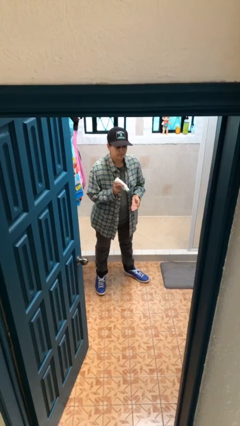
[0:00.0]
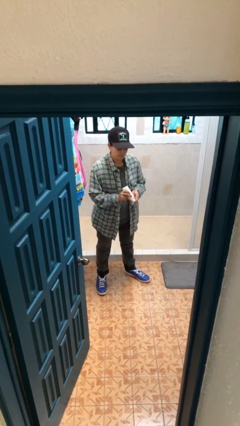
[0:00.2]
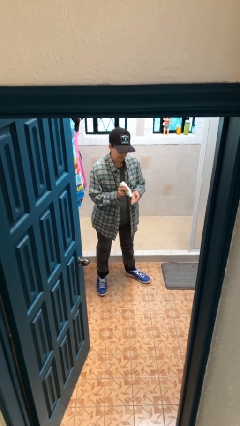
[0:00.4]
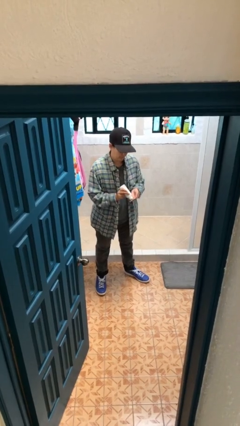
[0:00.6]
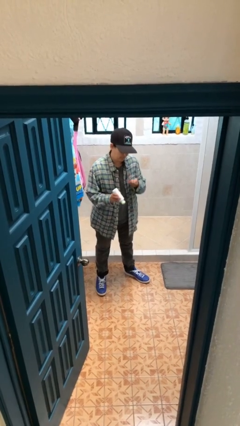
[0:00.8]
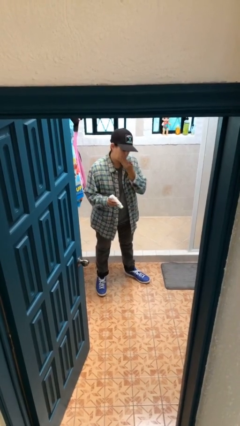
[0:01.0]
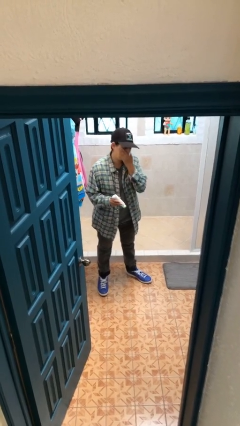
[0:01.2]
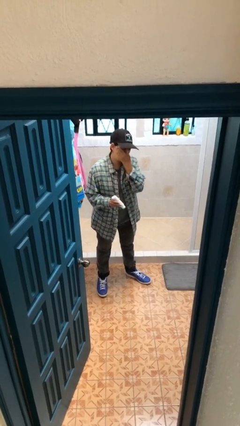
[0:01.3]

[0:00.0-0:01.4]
person applies facial moisturizer

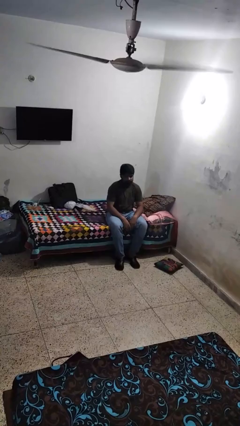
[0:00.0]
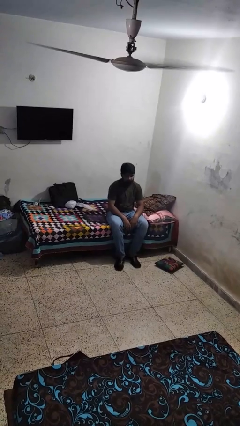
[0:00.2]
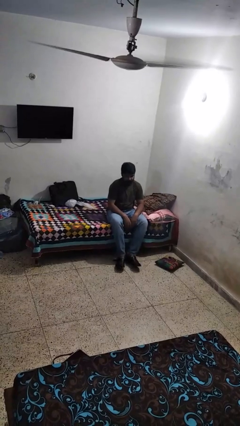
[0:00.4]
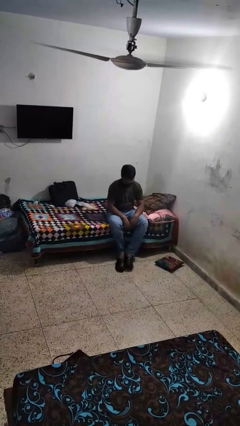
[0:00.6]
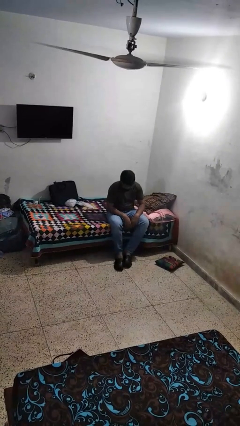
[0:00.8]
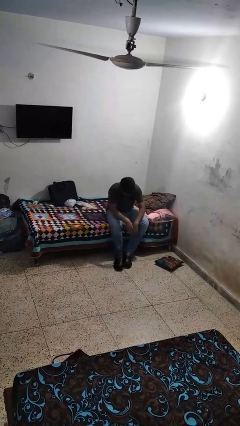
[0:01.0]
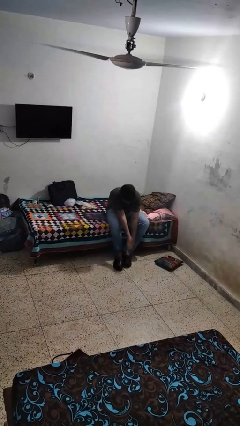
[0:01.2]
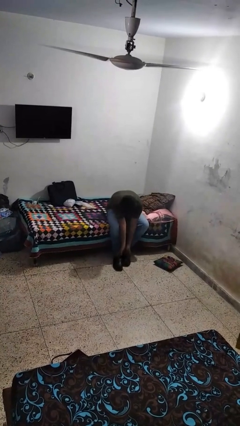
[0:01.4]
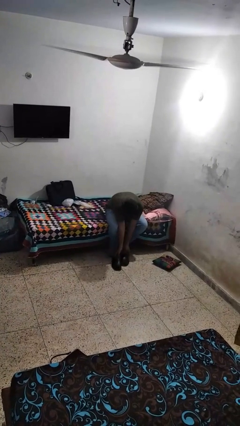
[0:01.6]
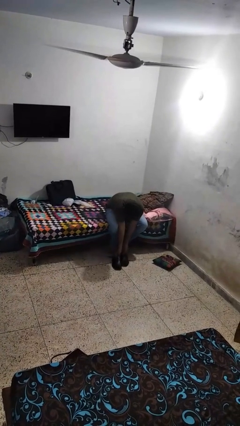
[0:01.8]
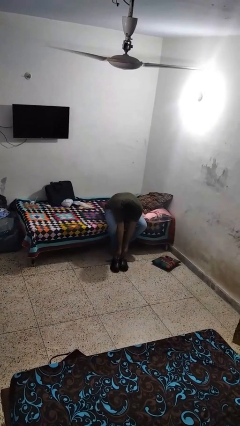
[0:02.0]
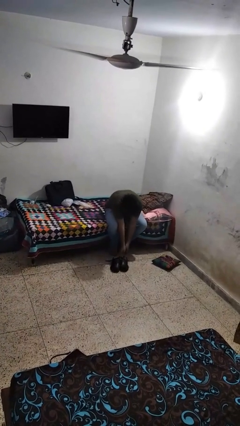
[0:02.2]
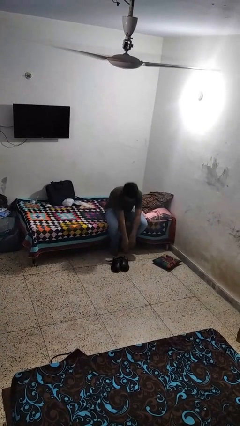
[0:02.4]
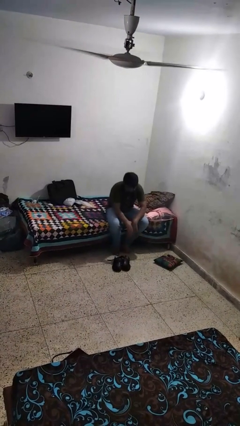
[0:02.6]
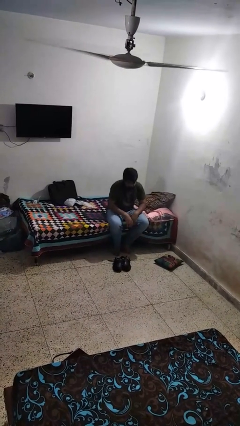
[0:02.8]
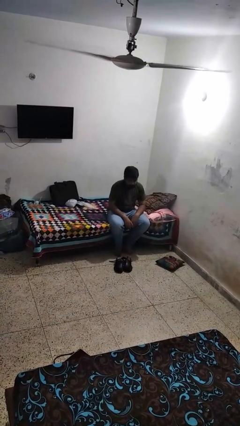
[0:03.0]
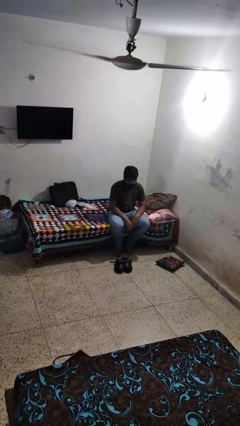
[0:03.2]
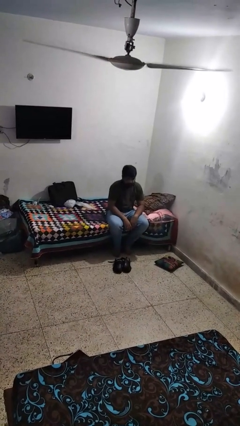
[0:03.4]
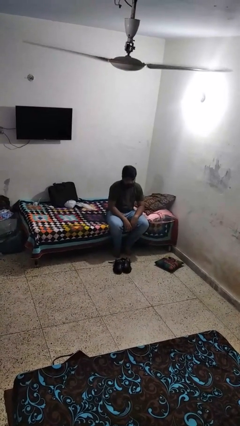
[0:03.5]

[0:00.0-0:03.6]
person takes off shoes

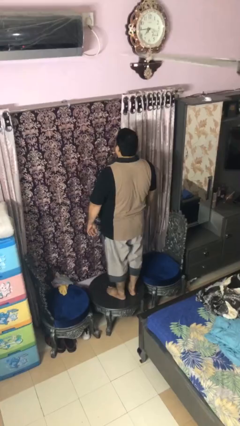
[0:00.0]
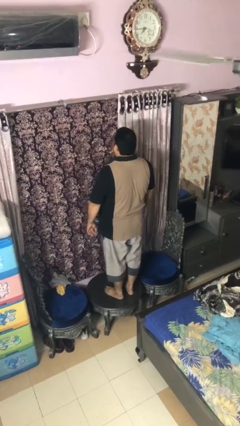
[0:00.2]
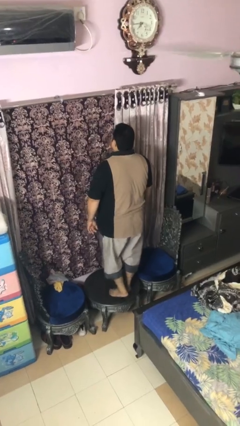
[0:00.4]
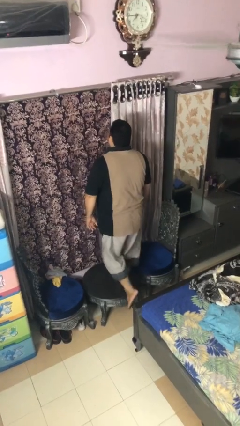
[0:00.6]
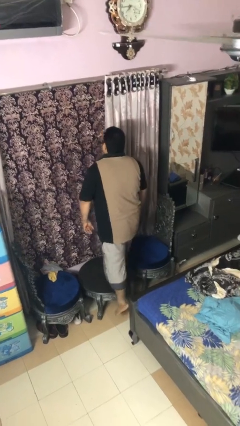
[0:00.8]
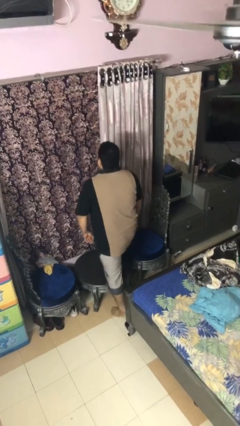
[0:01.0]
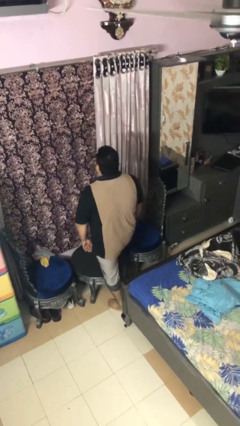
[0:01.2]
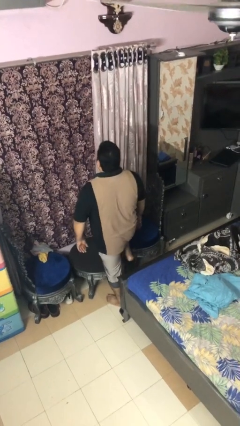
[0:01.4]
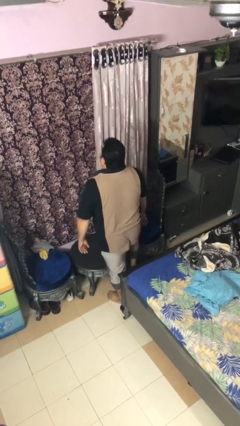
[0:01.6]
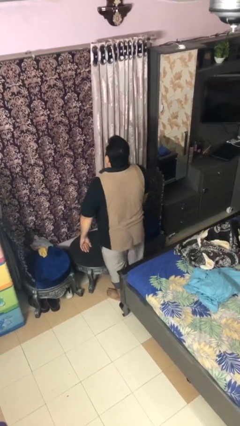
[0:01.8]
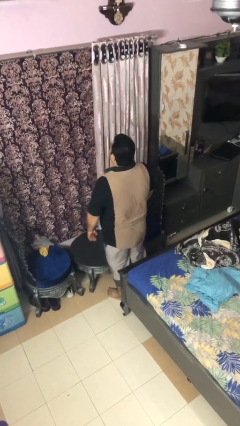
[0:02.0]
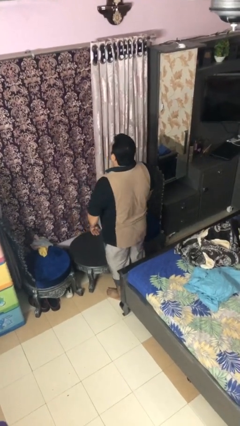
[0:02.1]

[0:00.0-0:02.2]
person climbs off table

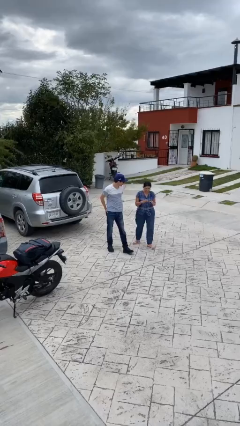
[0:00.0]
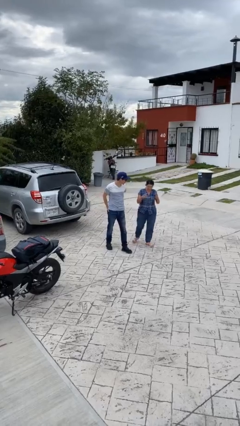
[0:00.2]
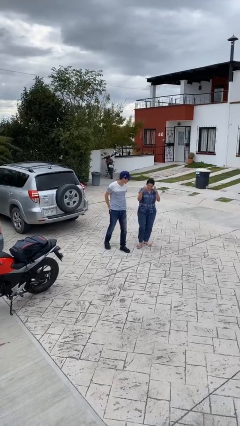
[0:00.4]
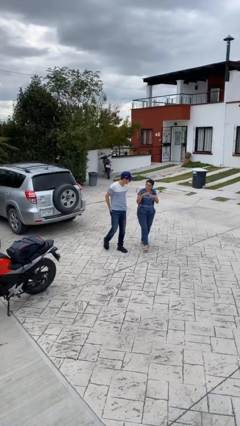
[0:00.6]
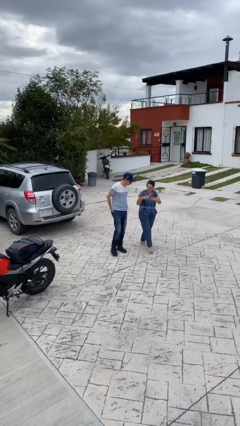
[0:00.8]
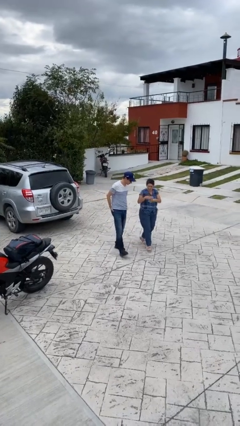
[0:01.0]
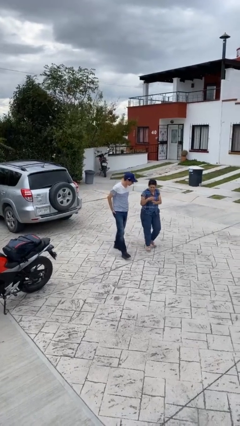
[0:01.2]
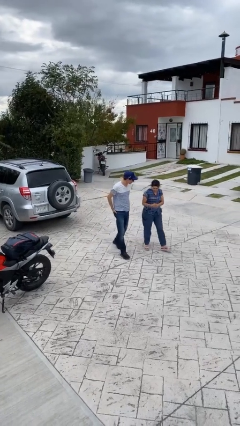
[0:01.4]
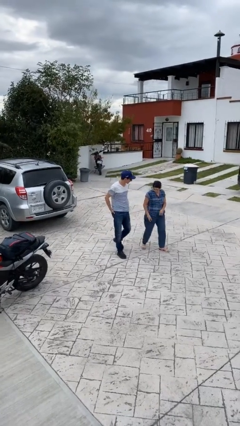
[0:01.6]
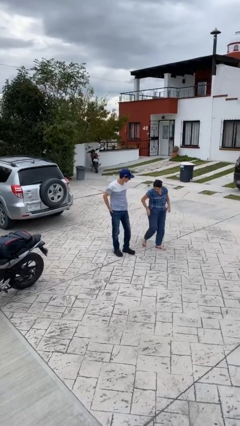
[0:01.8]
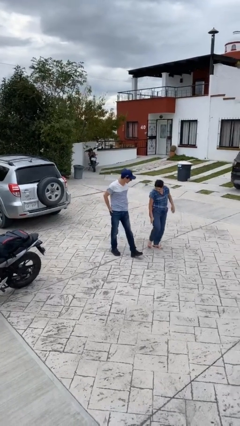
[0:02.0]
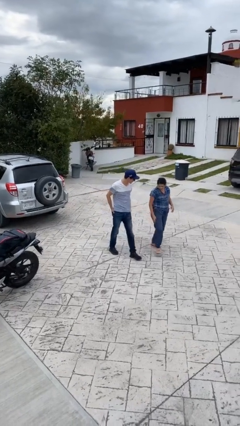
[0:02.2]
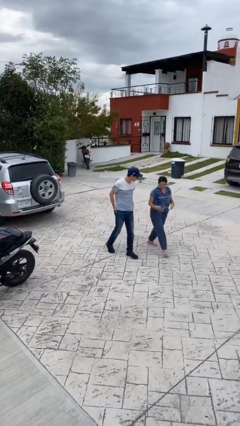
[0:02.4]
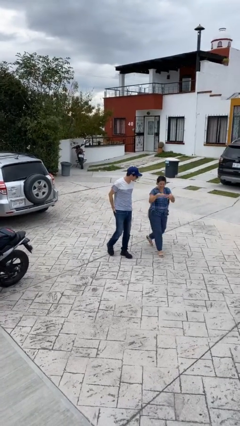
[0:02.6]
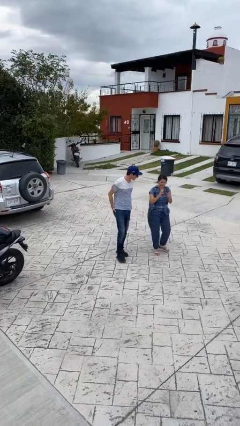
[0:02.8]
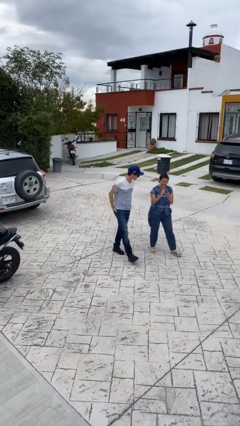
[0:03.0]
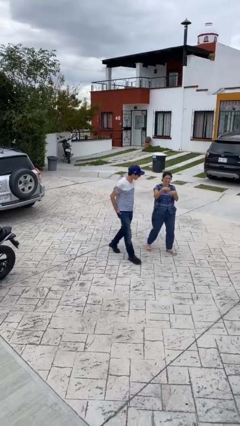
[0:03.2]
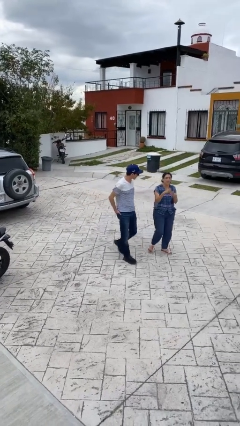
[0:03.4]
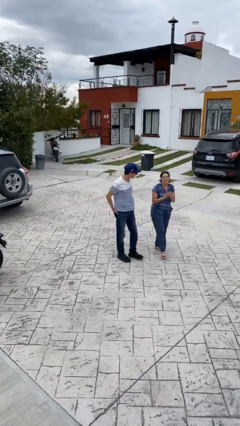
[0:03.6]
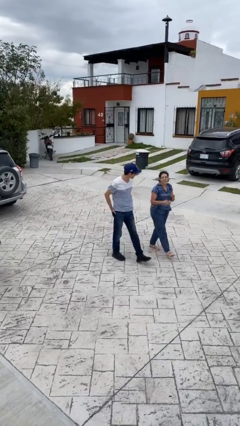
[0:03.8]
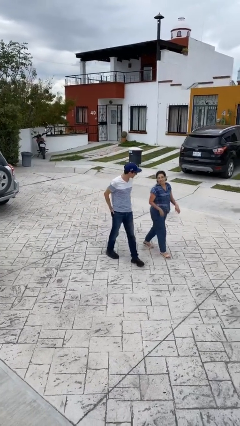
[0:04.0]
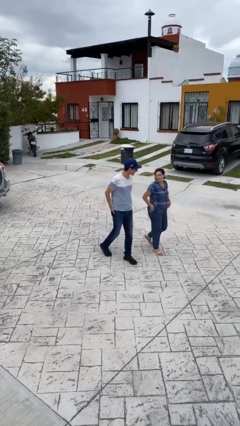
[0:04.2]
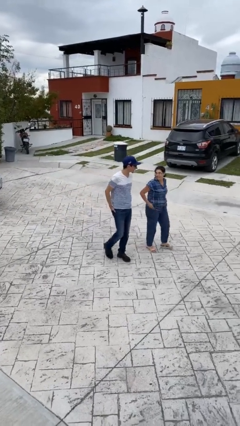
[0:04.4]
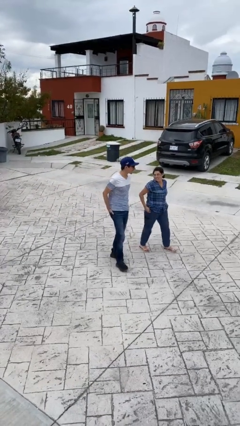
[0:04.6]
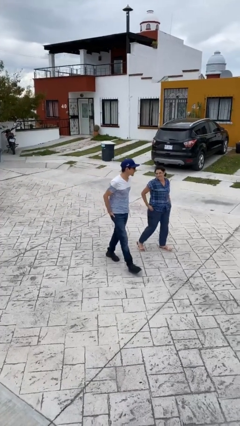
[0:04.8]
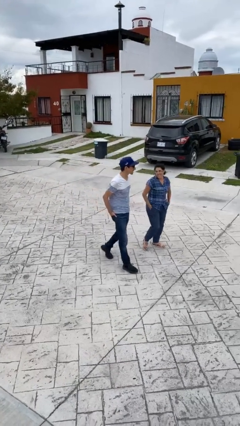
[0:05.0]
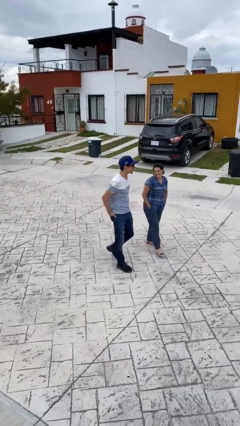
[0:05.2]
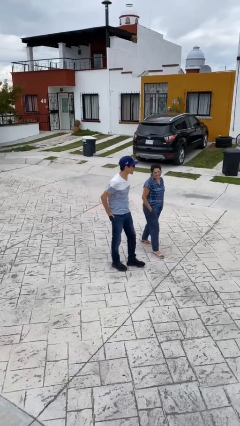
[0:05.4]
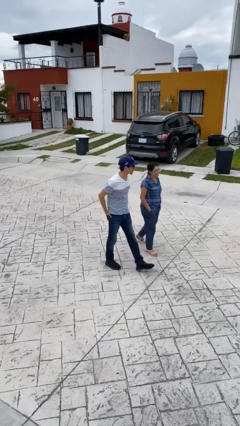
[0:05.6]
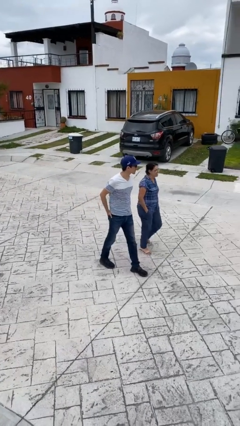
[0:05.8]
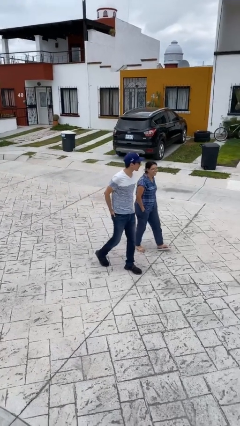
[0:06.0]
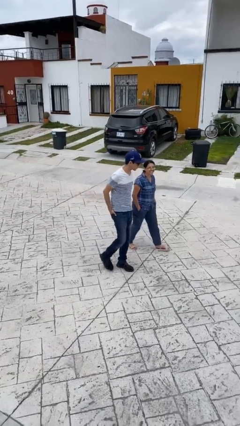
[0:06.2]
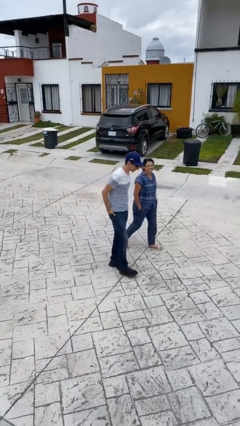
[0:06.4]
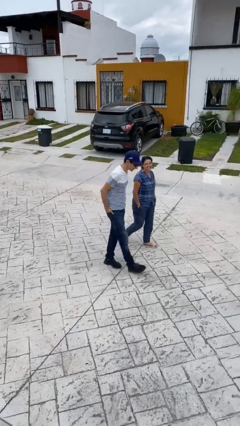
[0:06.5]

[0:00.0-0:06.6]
person talks to person

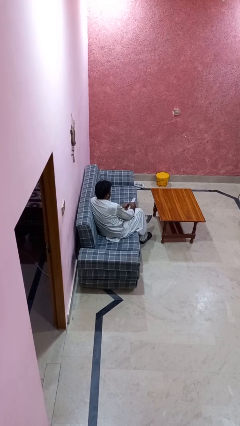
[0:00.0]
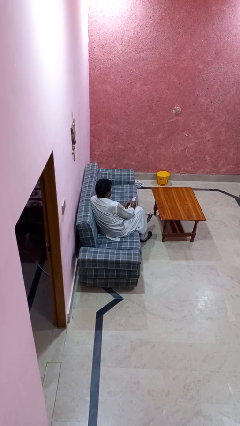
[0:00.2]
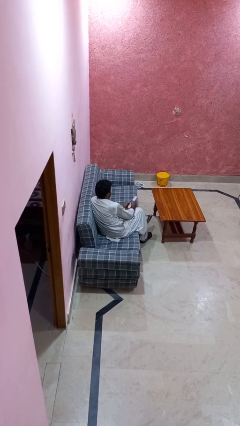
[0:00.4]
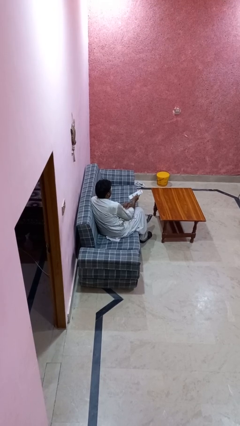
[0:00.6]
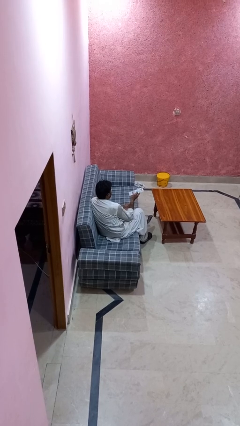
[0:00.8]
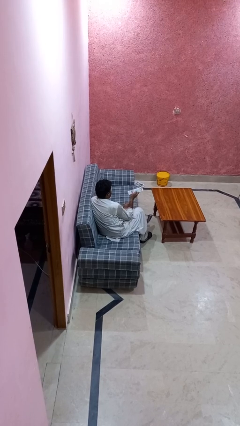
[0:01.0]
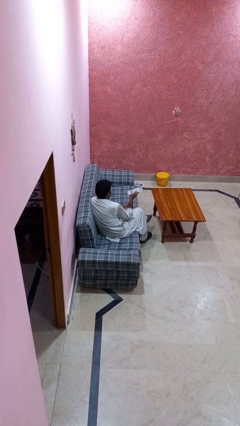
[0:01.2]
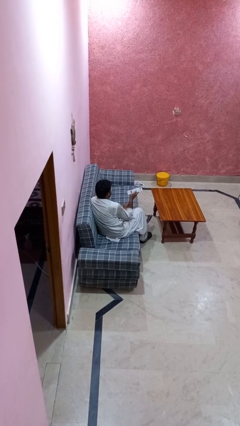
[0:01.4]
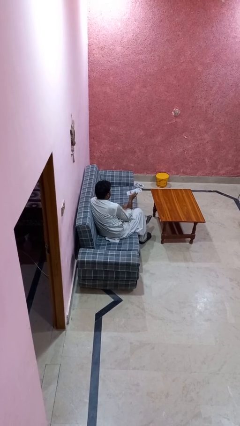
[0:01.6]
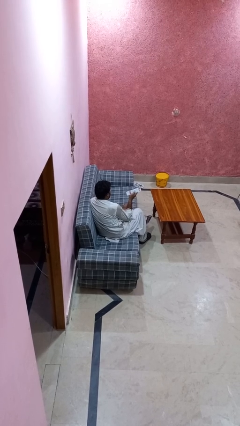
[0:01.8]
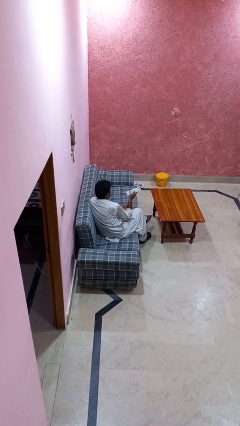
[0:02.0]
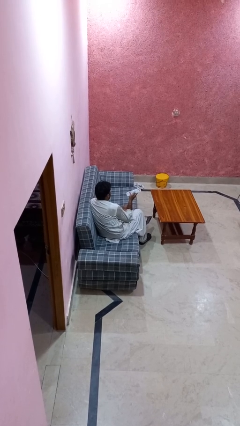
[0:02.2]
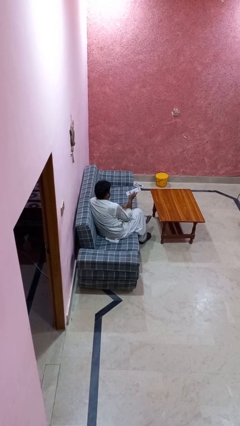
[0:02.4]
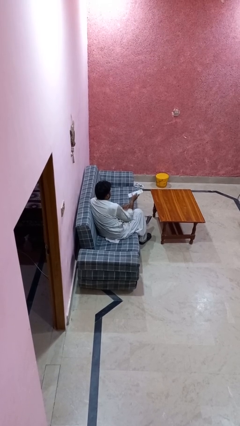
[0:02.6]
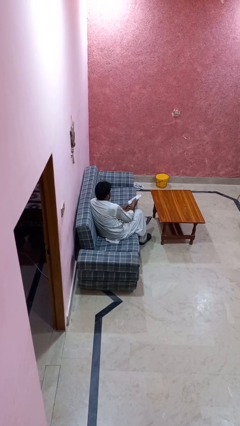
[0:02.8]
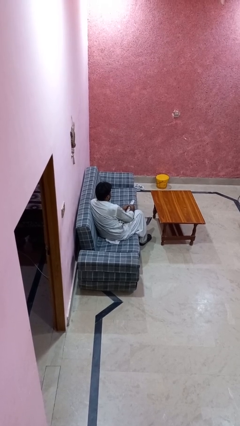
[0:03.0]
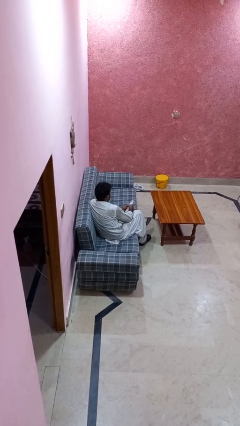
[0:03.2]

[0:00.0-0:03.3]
person uses television remote

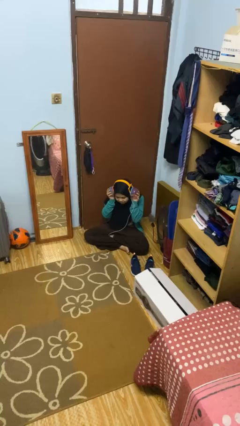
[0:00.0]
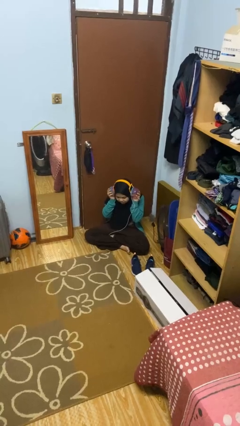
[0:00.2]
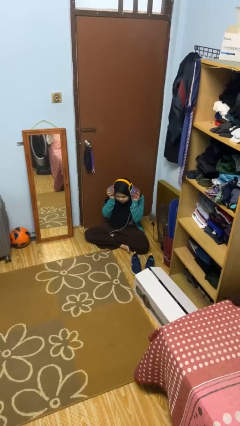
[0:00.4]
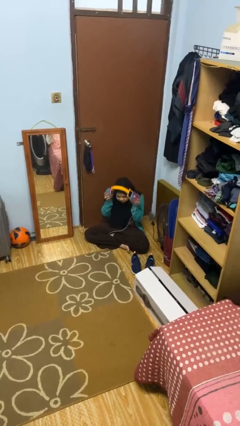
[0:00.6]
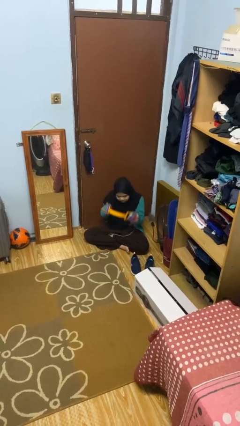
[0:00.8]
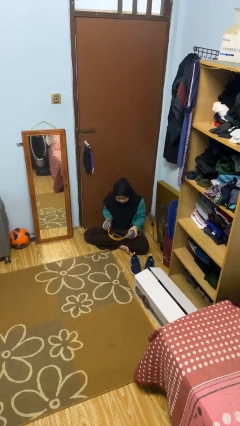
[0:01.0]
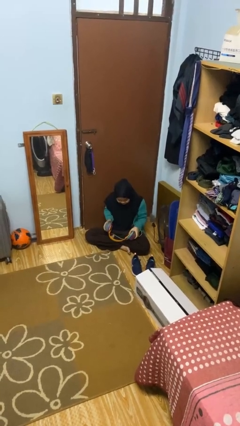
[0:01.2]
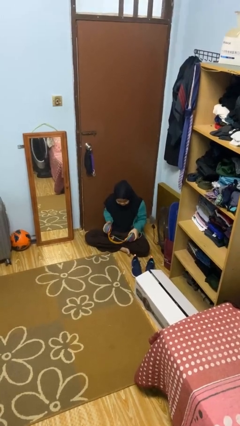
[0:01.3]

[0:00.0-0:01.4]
person takes off headphones
